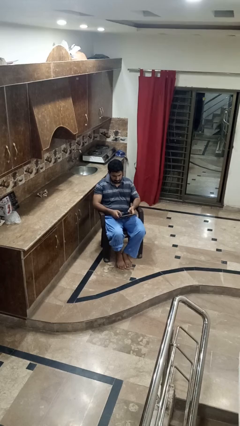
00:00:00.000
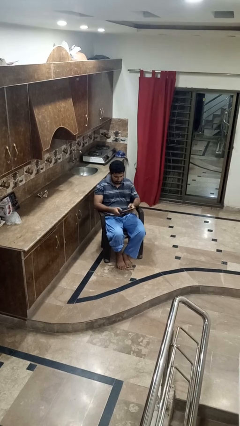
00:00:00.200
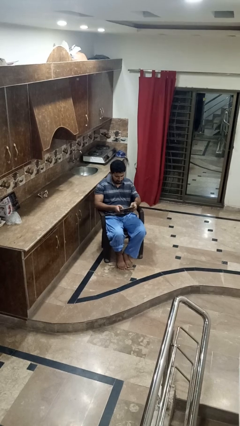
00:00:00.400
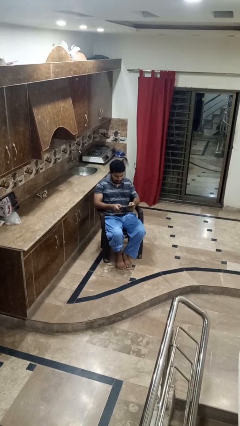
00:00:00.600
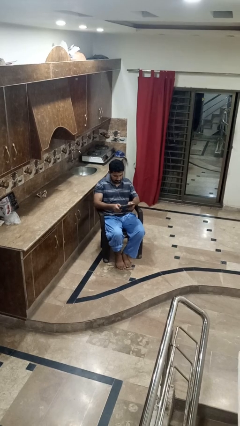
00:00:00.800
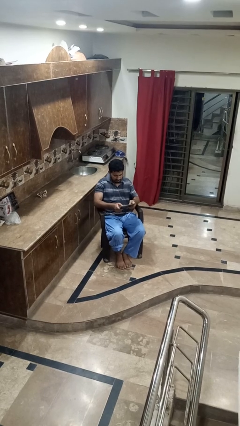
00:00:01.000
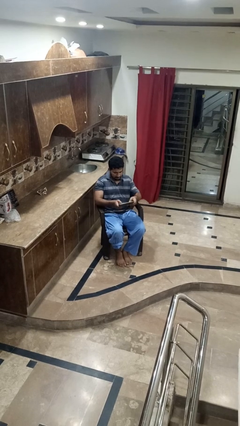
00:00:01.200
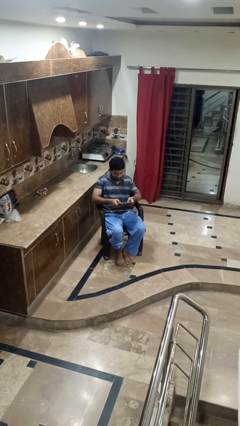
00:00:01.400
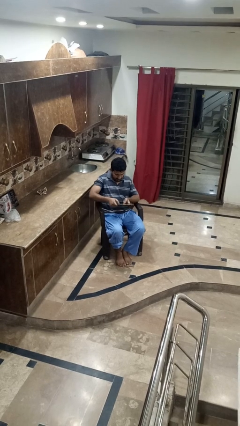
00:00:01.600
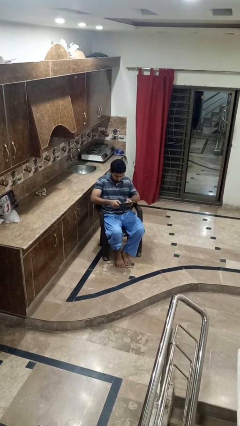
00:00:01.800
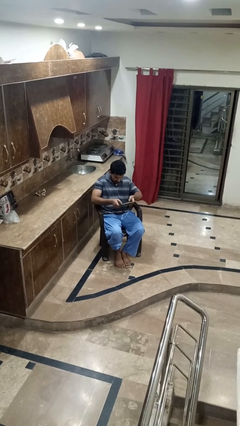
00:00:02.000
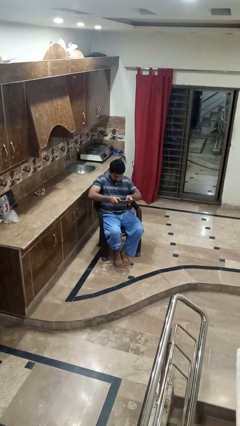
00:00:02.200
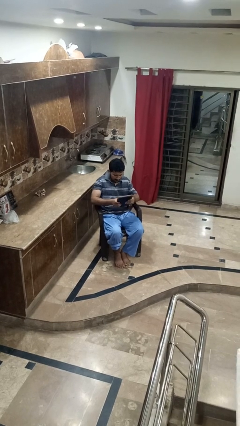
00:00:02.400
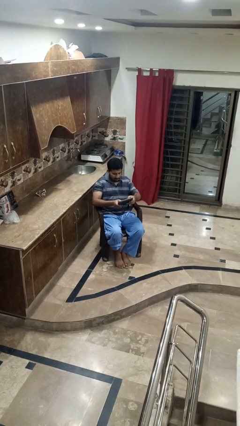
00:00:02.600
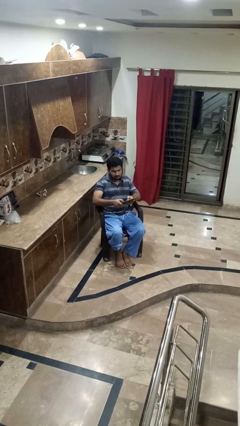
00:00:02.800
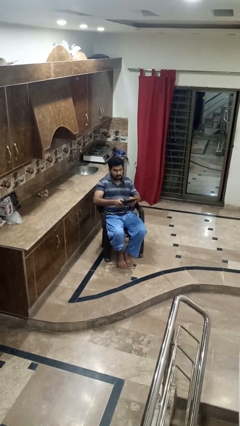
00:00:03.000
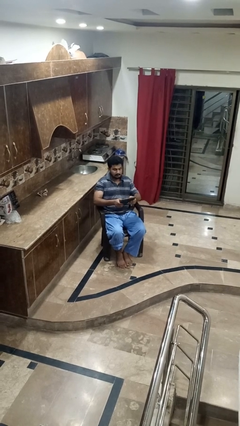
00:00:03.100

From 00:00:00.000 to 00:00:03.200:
person interacts with handheld game

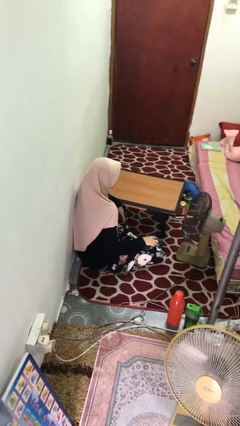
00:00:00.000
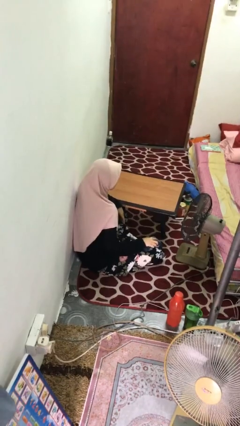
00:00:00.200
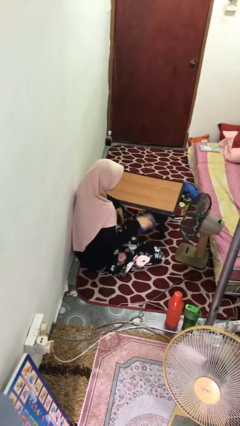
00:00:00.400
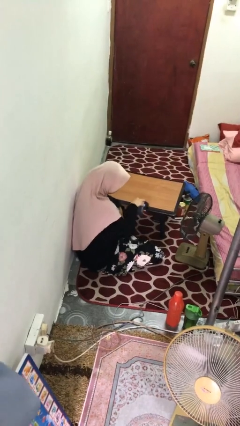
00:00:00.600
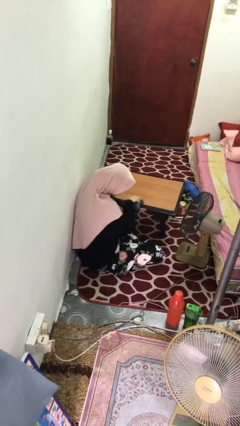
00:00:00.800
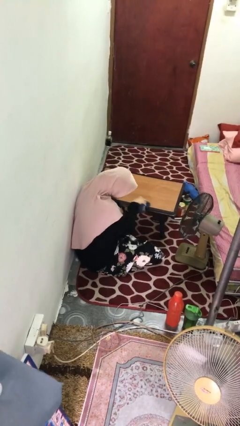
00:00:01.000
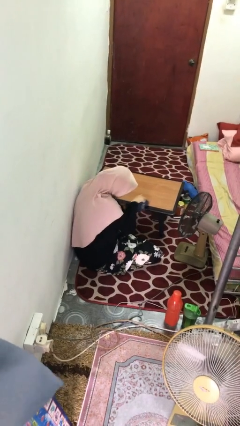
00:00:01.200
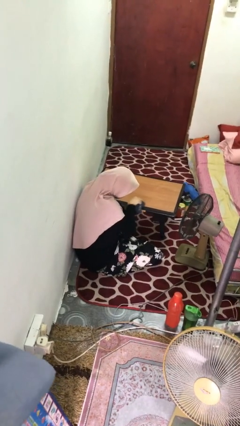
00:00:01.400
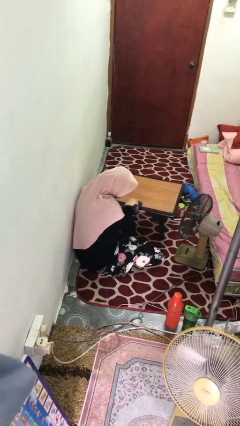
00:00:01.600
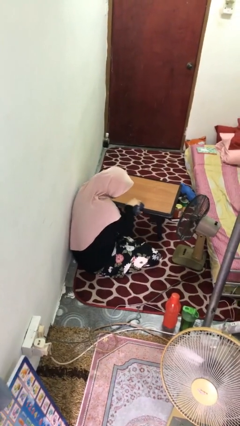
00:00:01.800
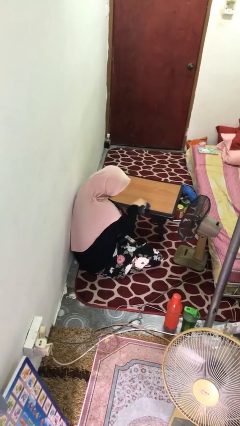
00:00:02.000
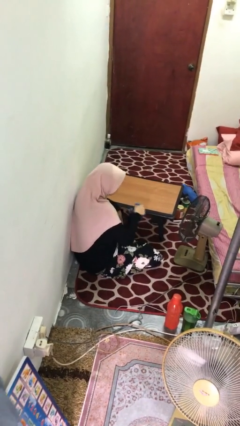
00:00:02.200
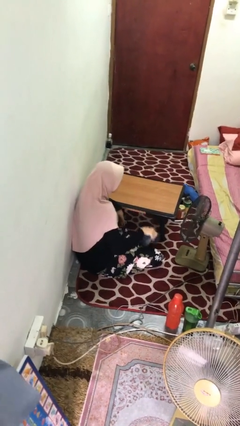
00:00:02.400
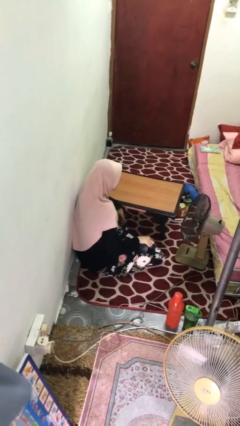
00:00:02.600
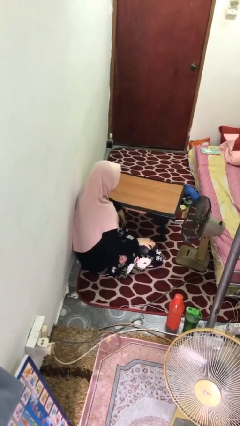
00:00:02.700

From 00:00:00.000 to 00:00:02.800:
person cleans table with rag

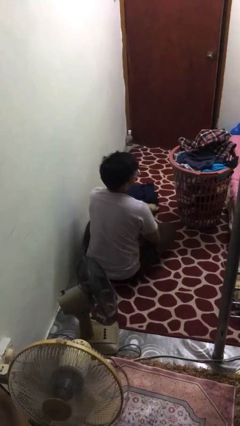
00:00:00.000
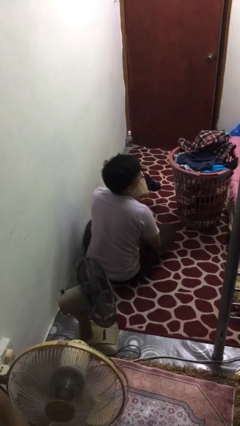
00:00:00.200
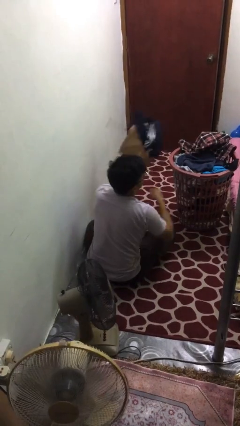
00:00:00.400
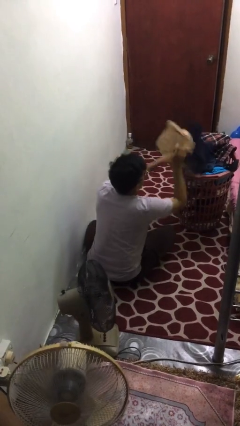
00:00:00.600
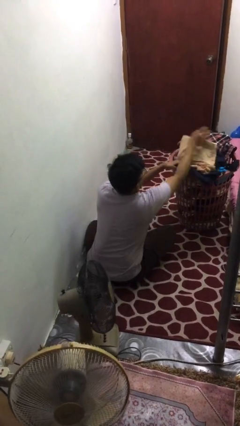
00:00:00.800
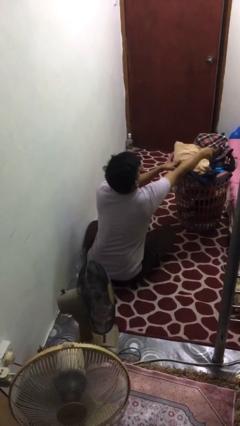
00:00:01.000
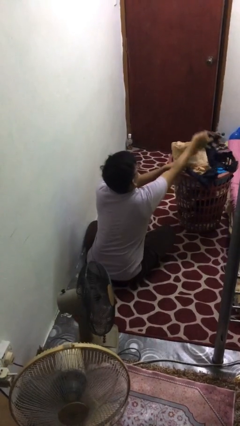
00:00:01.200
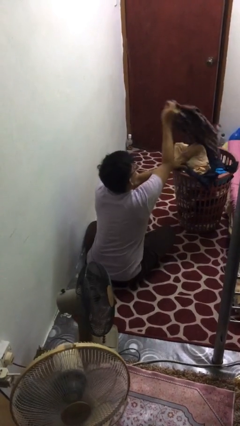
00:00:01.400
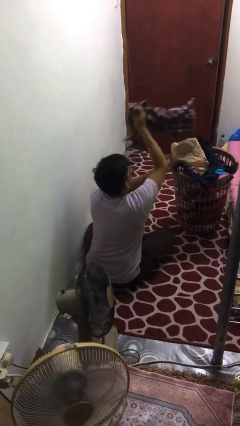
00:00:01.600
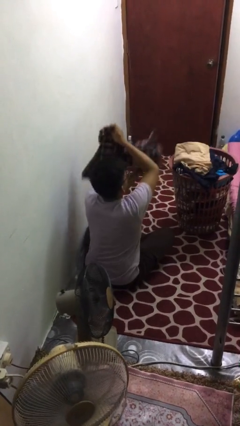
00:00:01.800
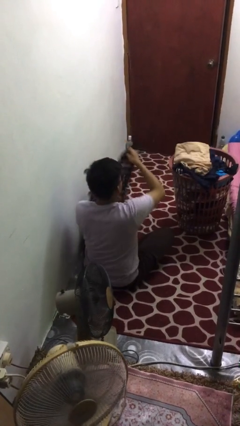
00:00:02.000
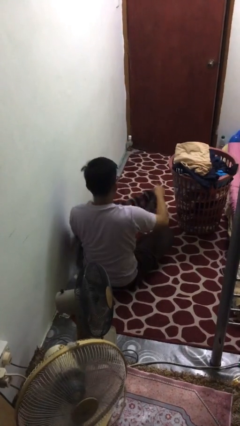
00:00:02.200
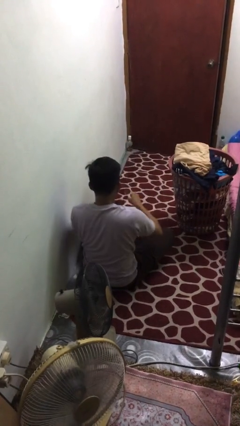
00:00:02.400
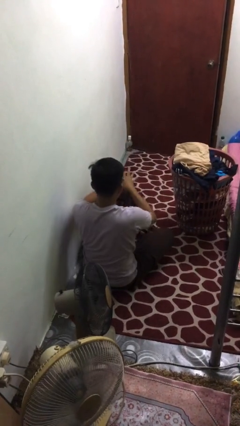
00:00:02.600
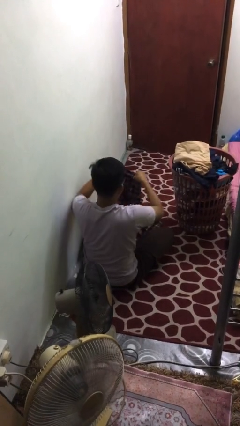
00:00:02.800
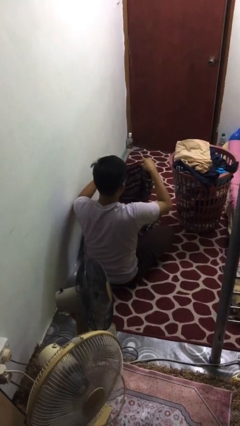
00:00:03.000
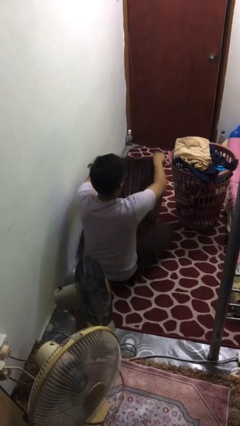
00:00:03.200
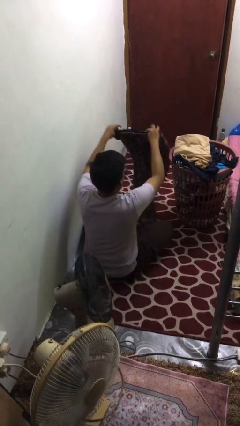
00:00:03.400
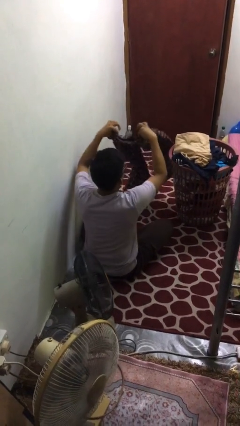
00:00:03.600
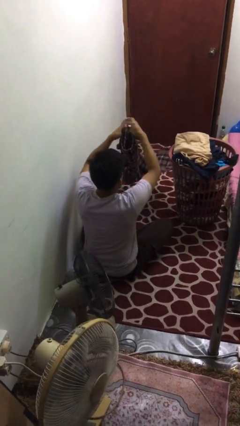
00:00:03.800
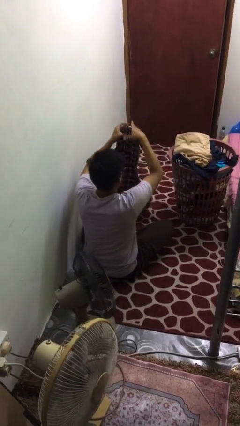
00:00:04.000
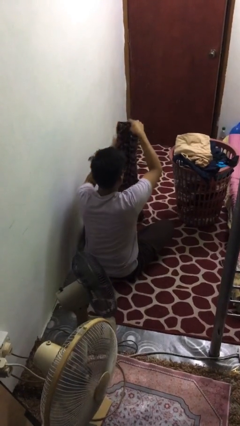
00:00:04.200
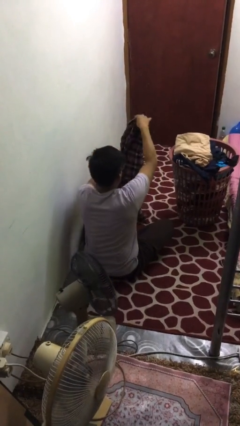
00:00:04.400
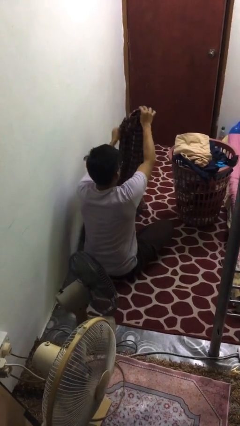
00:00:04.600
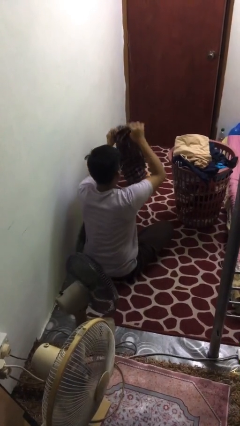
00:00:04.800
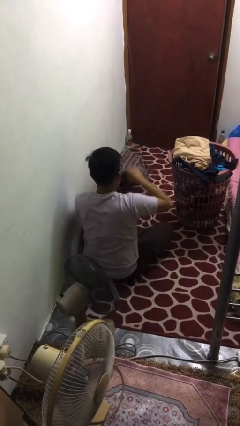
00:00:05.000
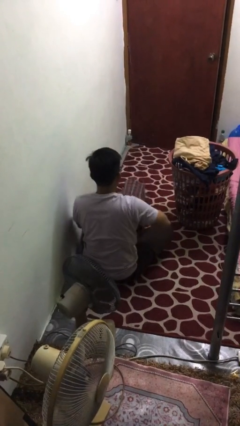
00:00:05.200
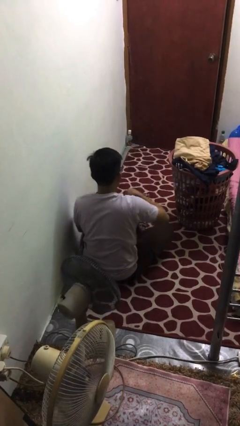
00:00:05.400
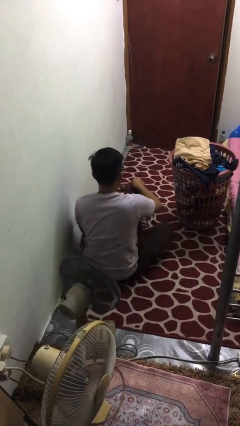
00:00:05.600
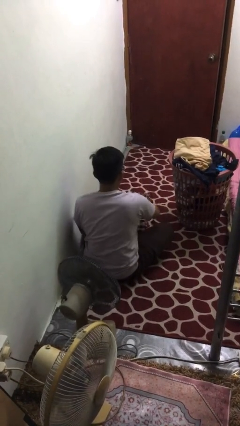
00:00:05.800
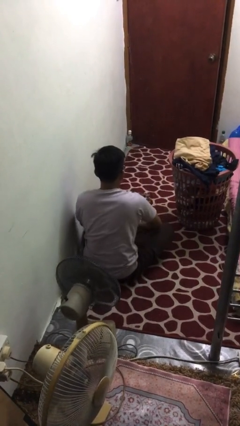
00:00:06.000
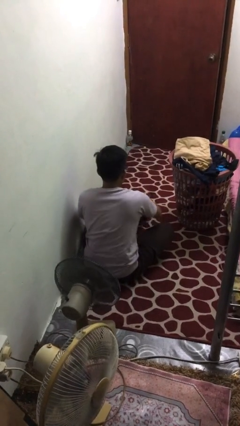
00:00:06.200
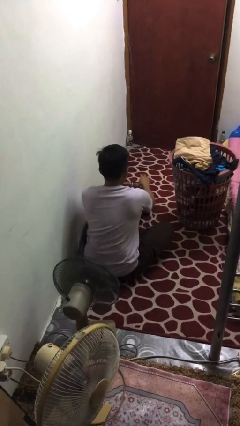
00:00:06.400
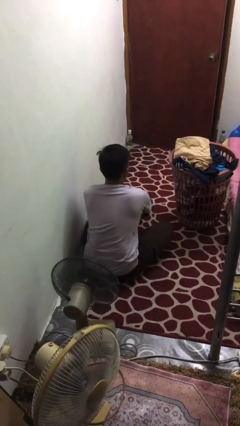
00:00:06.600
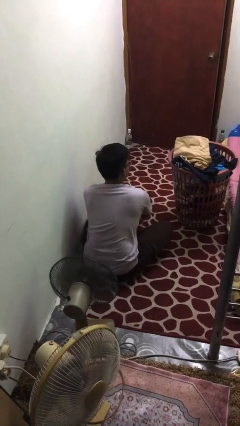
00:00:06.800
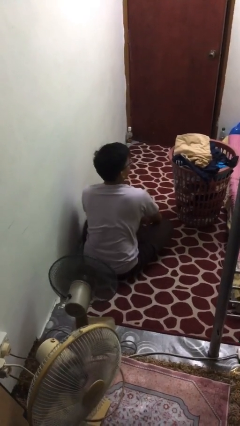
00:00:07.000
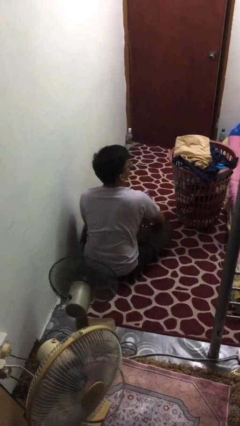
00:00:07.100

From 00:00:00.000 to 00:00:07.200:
person folds pants

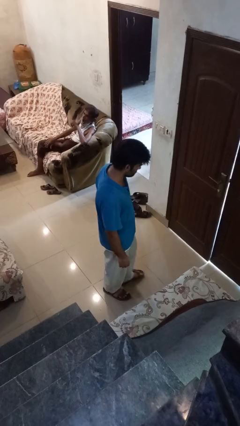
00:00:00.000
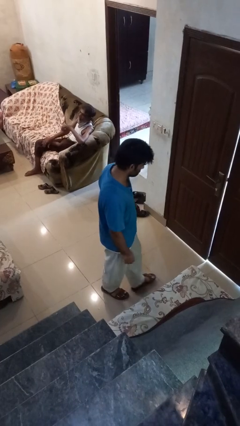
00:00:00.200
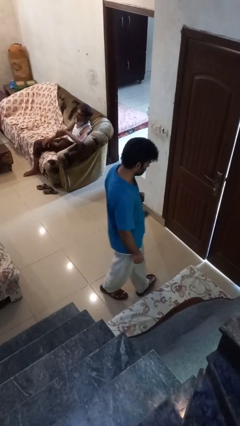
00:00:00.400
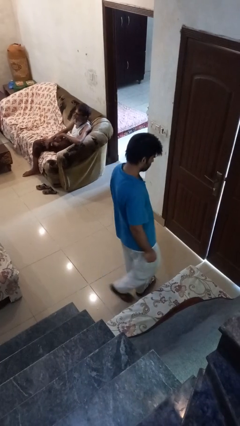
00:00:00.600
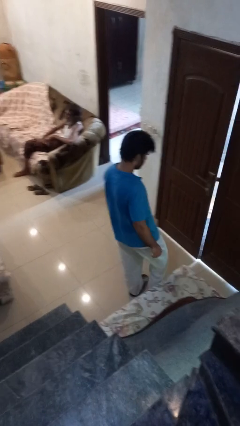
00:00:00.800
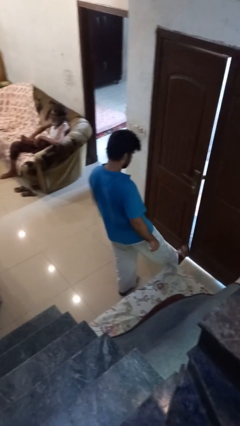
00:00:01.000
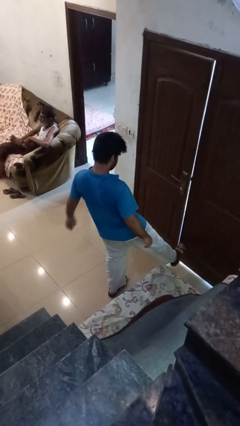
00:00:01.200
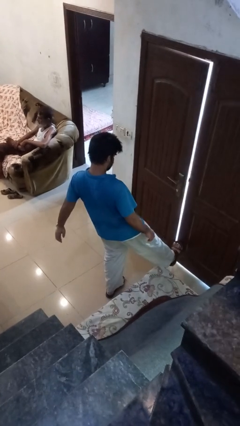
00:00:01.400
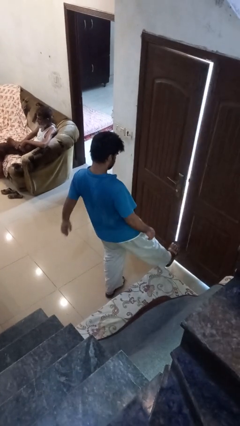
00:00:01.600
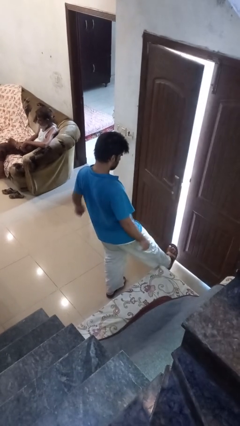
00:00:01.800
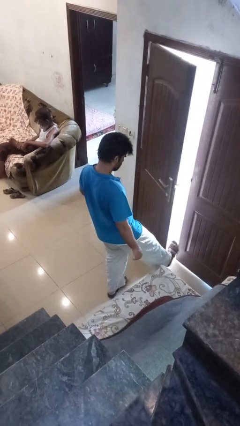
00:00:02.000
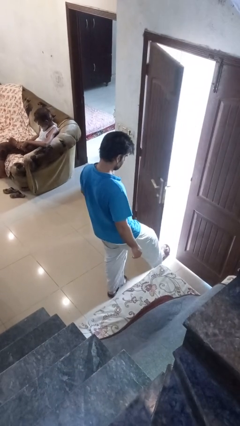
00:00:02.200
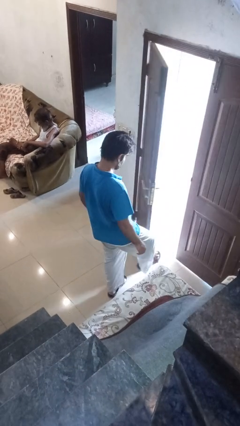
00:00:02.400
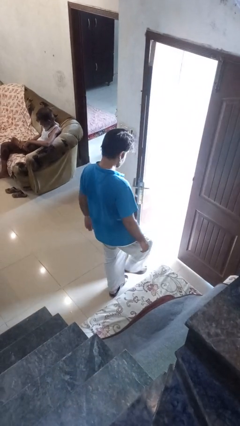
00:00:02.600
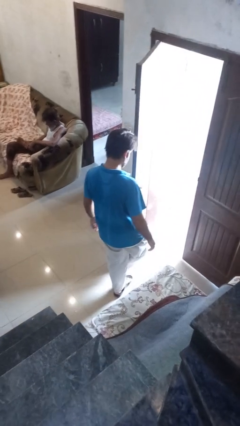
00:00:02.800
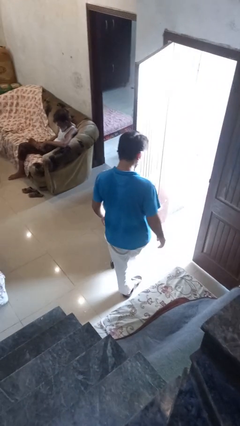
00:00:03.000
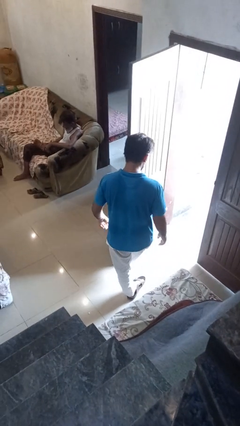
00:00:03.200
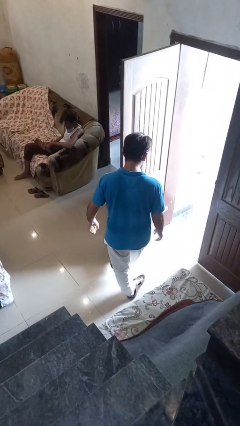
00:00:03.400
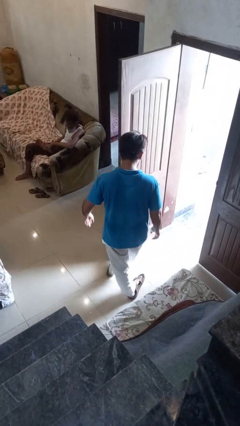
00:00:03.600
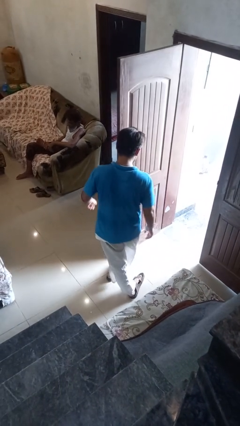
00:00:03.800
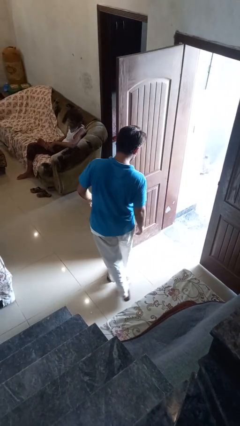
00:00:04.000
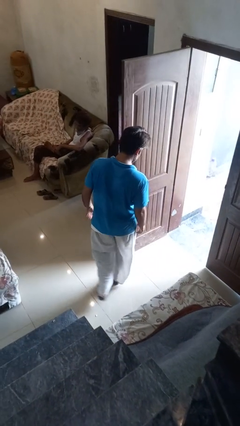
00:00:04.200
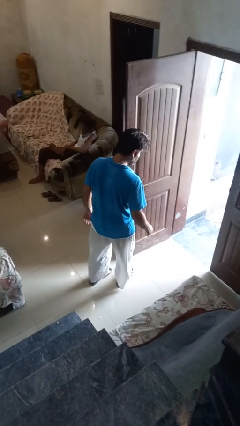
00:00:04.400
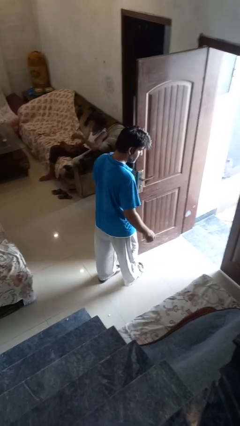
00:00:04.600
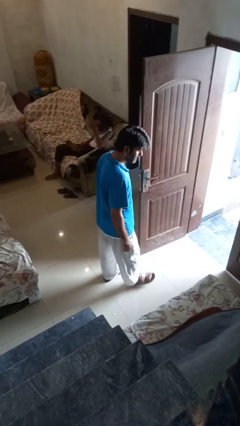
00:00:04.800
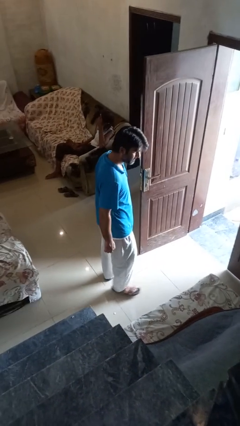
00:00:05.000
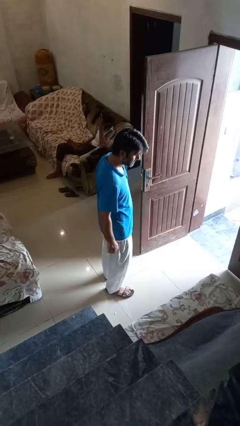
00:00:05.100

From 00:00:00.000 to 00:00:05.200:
person opens facility door
